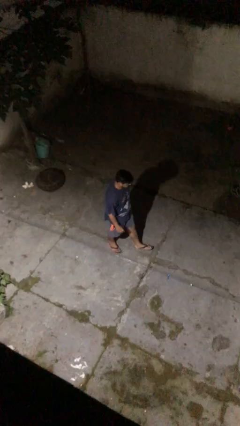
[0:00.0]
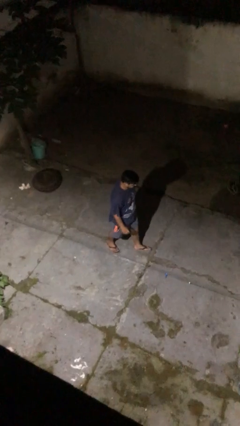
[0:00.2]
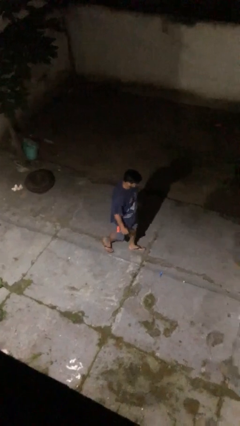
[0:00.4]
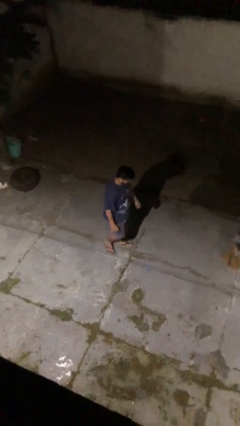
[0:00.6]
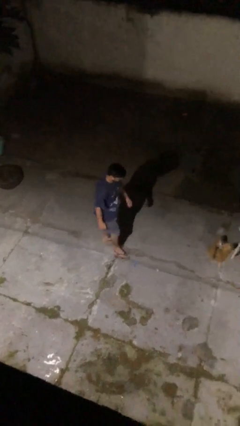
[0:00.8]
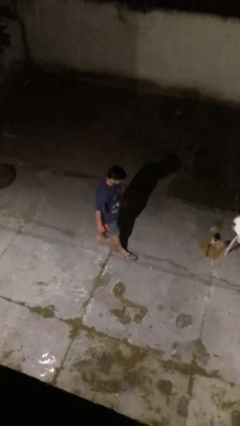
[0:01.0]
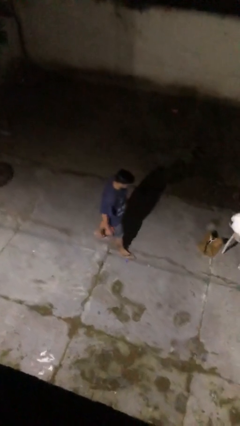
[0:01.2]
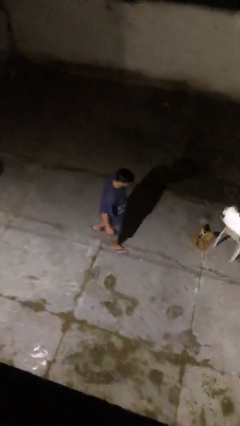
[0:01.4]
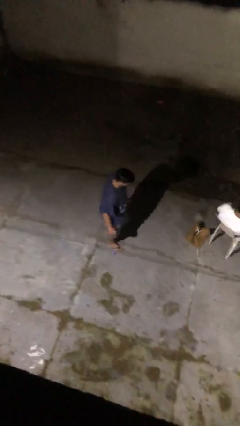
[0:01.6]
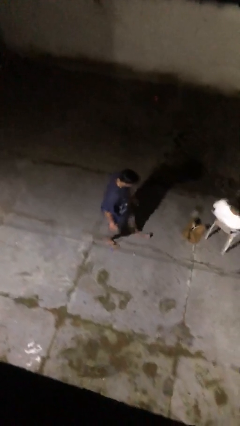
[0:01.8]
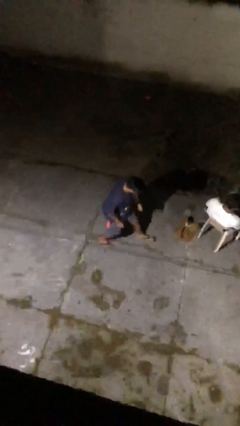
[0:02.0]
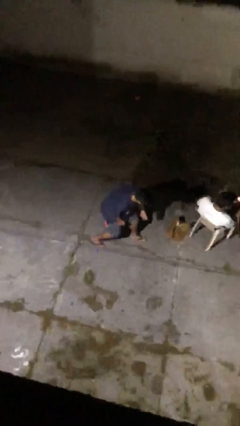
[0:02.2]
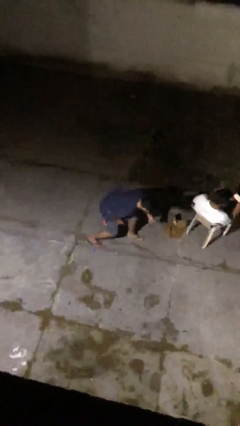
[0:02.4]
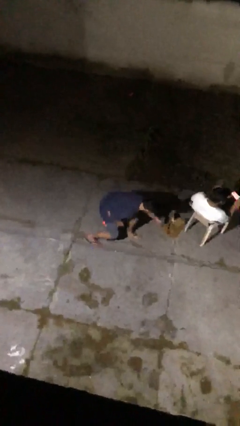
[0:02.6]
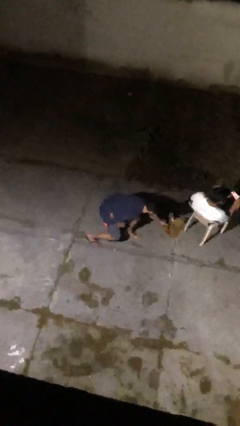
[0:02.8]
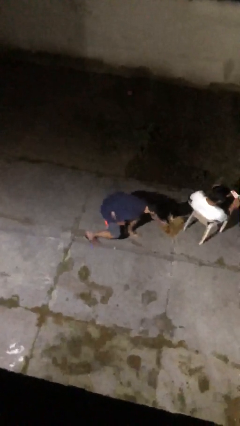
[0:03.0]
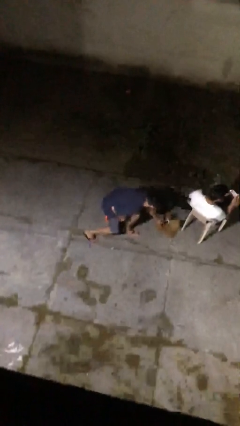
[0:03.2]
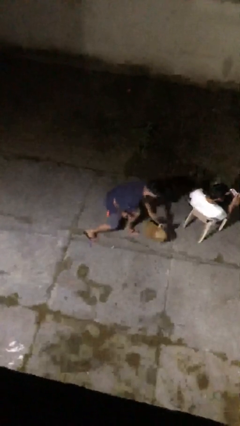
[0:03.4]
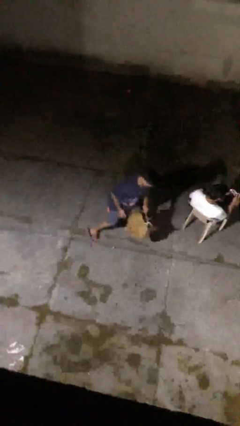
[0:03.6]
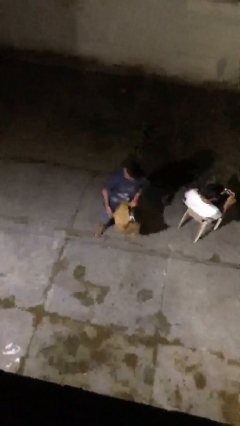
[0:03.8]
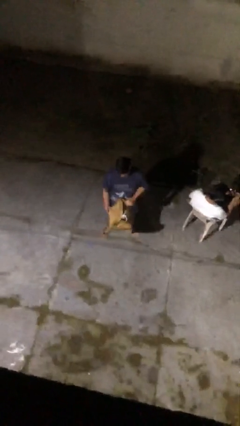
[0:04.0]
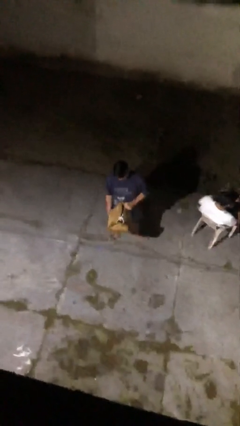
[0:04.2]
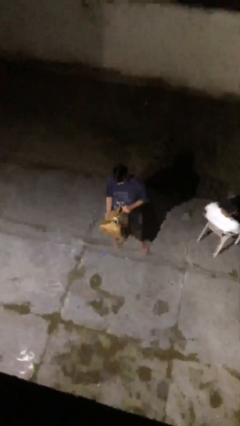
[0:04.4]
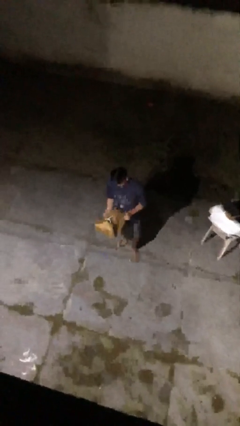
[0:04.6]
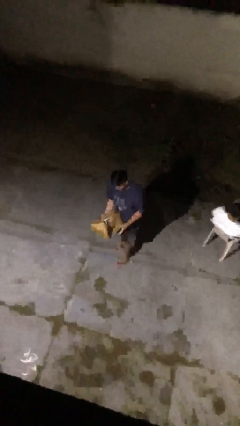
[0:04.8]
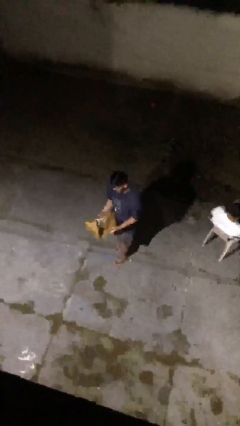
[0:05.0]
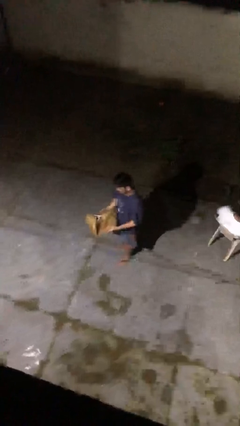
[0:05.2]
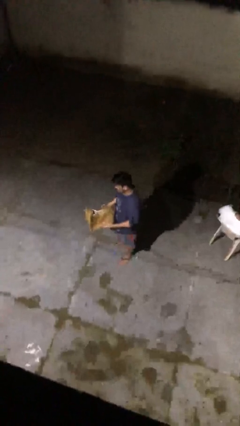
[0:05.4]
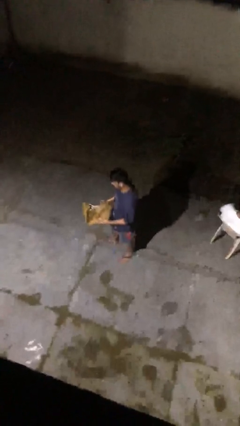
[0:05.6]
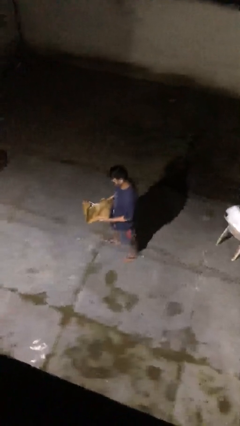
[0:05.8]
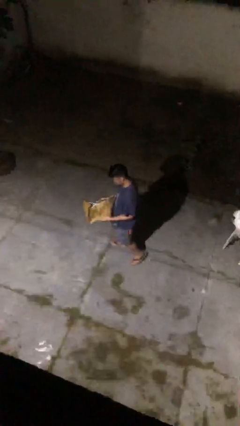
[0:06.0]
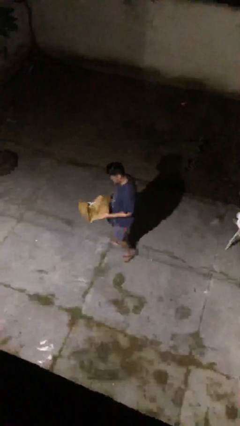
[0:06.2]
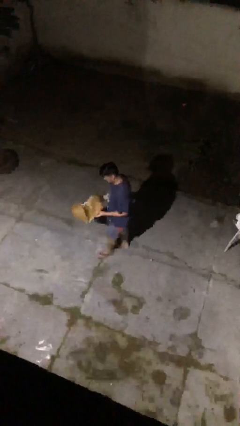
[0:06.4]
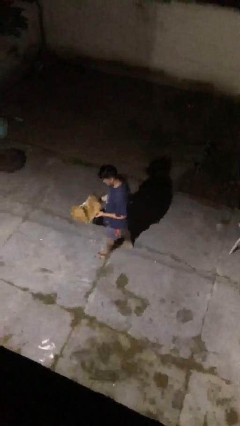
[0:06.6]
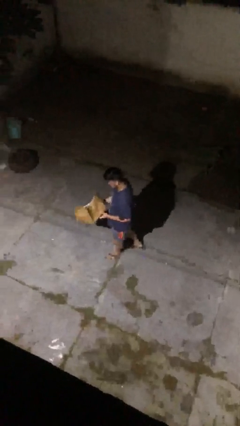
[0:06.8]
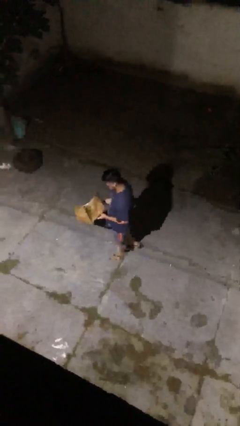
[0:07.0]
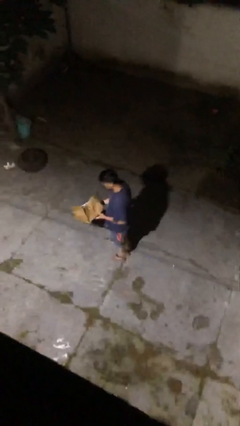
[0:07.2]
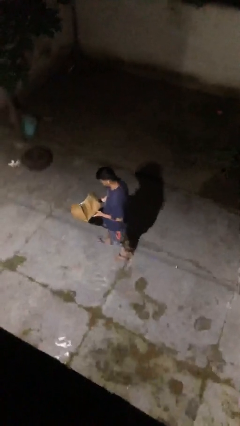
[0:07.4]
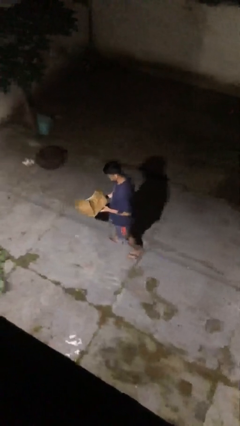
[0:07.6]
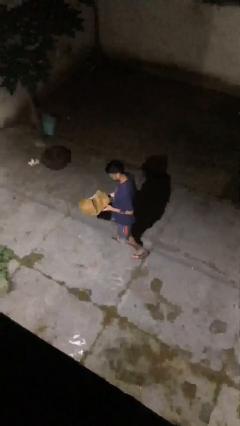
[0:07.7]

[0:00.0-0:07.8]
person steals object from person

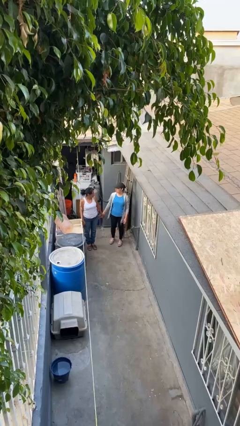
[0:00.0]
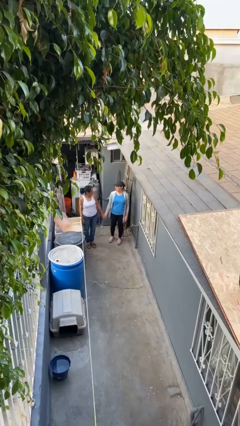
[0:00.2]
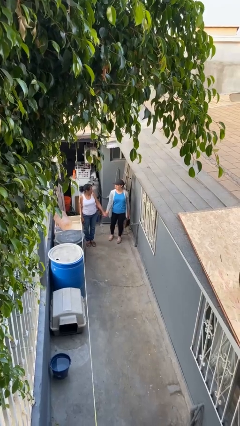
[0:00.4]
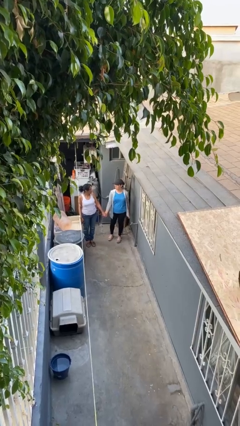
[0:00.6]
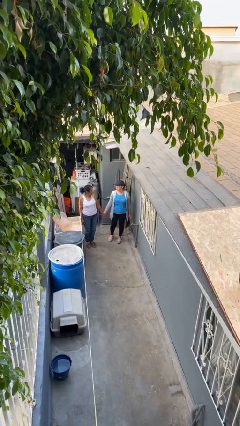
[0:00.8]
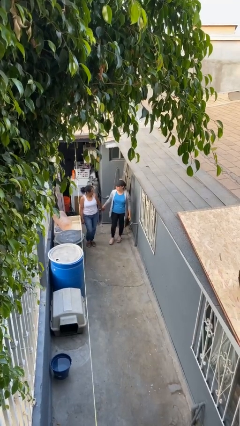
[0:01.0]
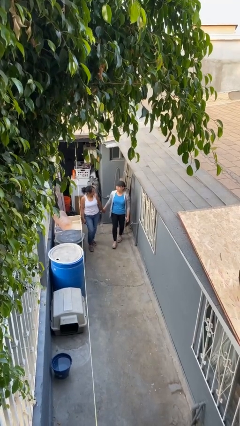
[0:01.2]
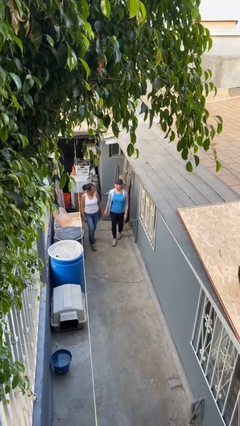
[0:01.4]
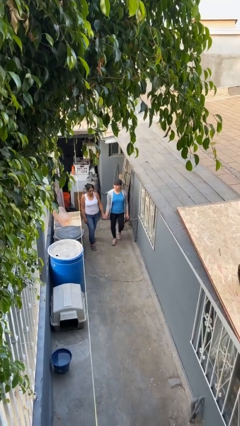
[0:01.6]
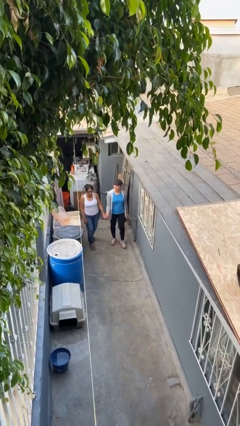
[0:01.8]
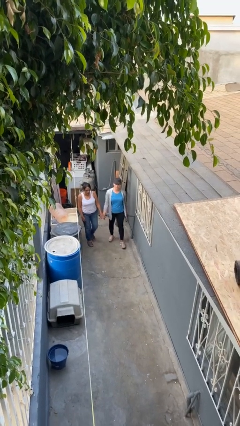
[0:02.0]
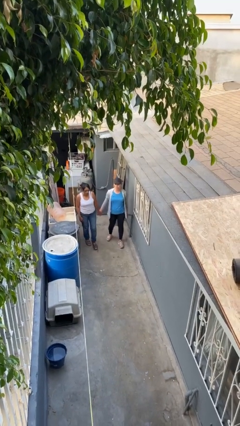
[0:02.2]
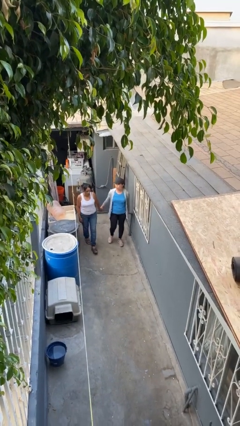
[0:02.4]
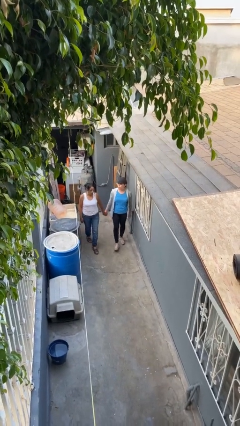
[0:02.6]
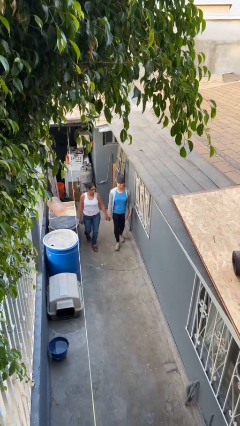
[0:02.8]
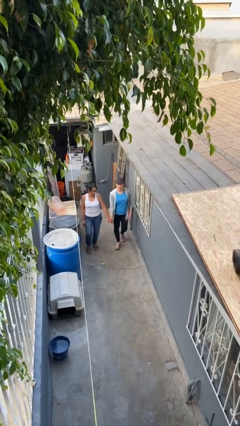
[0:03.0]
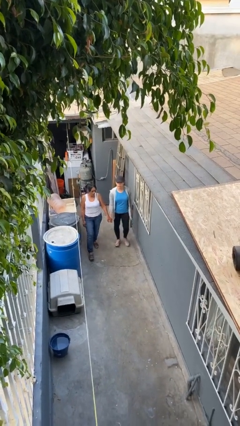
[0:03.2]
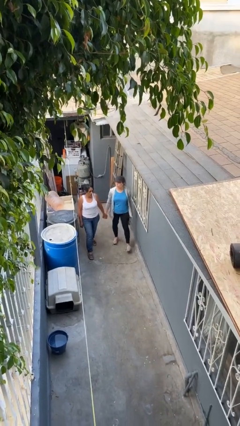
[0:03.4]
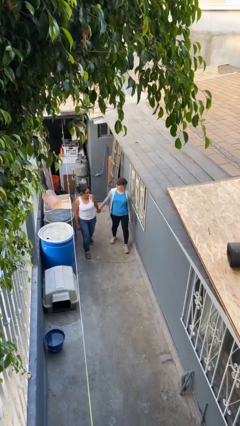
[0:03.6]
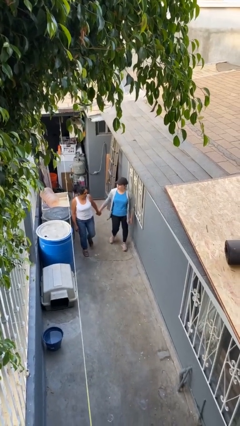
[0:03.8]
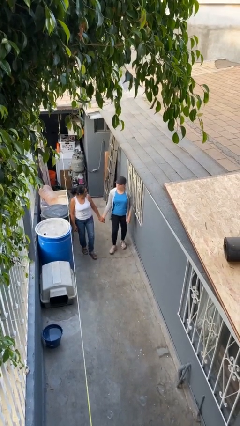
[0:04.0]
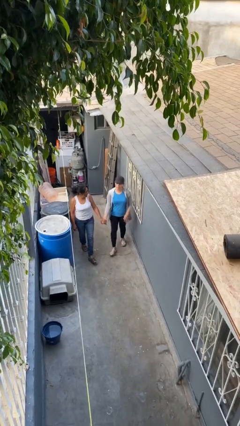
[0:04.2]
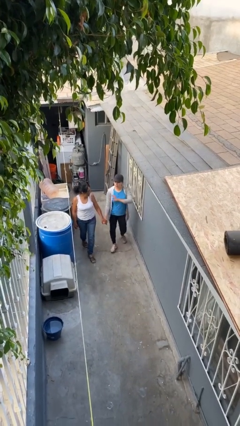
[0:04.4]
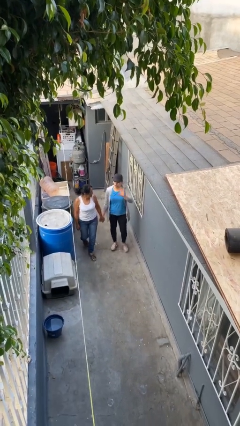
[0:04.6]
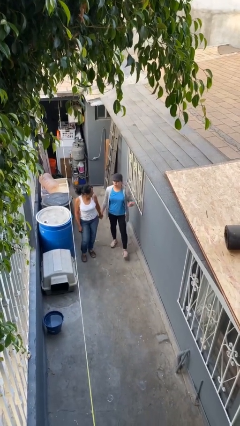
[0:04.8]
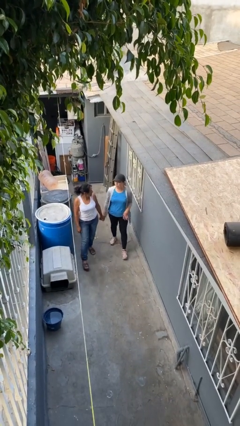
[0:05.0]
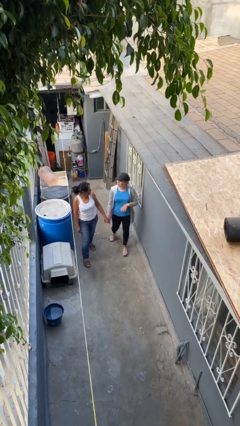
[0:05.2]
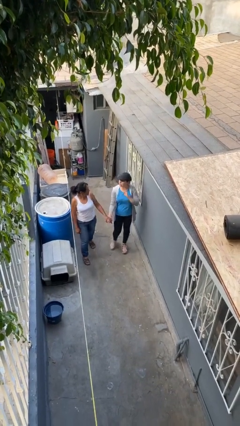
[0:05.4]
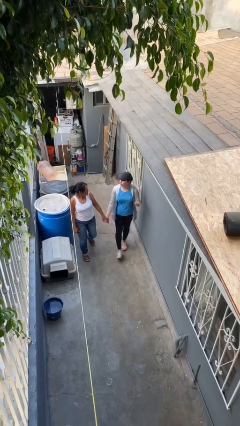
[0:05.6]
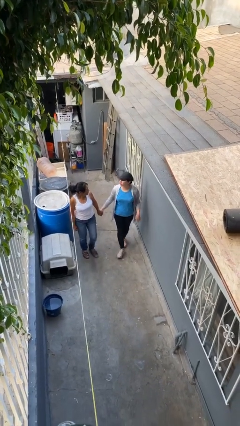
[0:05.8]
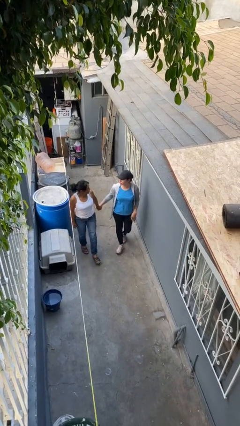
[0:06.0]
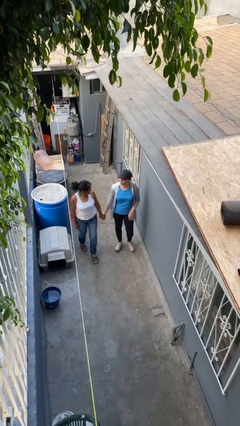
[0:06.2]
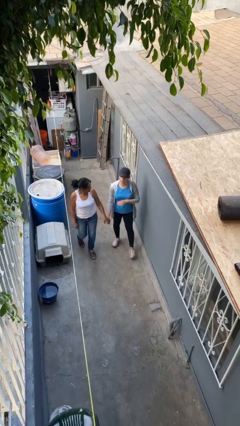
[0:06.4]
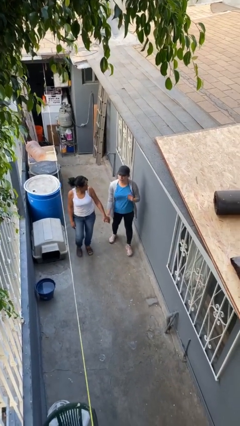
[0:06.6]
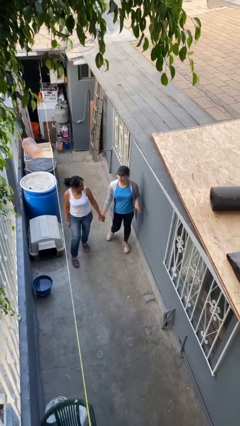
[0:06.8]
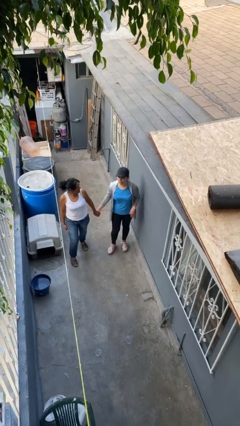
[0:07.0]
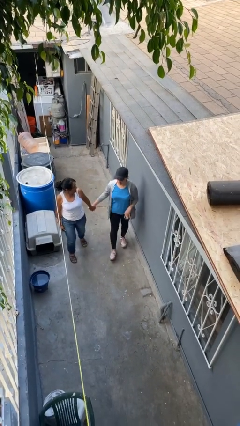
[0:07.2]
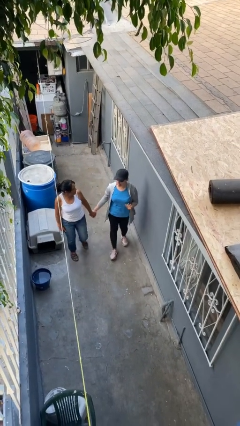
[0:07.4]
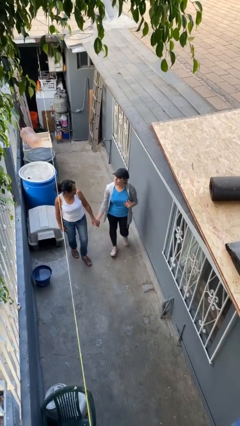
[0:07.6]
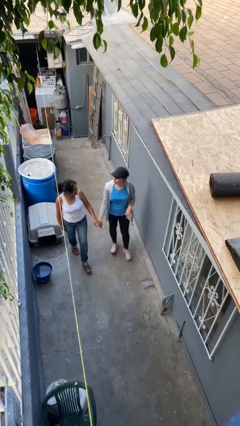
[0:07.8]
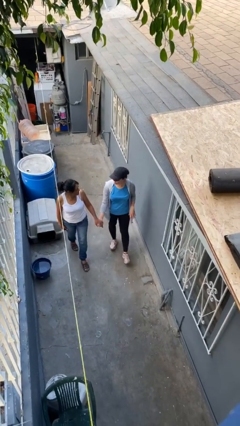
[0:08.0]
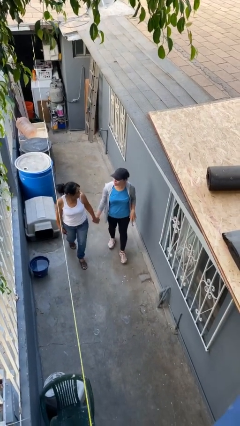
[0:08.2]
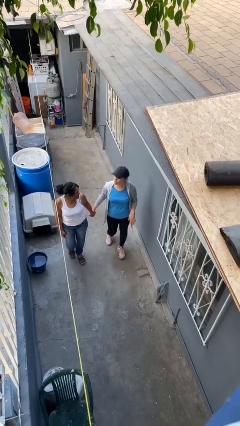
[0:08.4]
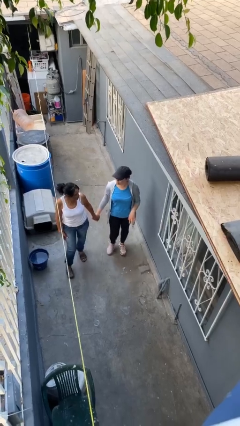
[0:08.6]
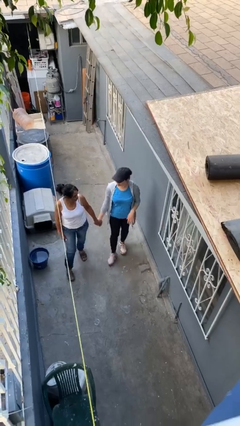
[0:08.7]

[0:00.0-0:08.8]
person holds hand

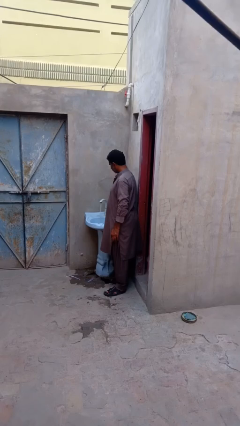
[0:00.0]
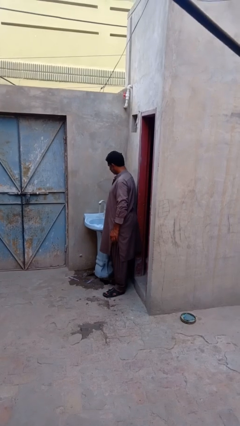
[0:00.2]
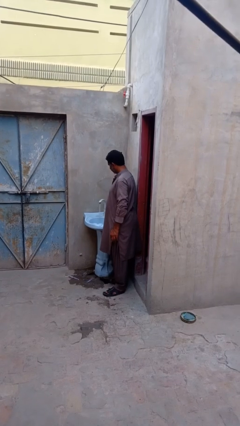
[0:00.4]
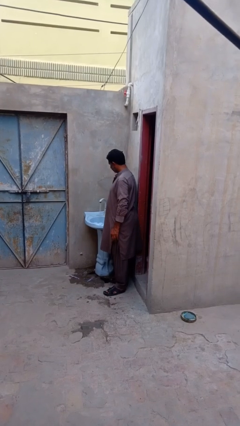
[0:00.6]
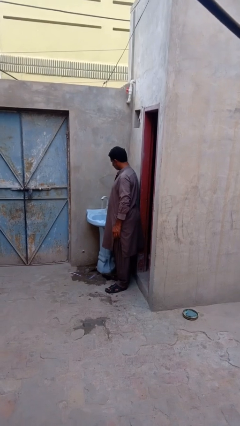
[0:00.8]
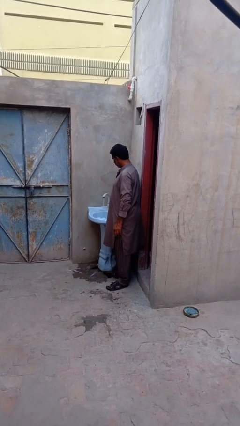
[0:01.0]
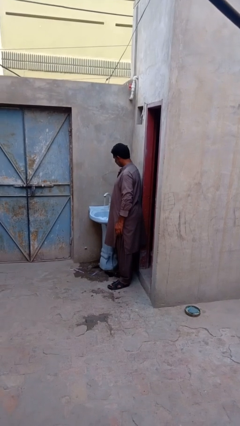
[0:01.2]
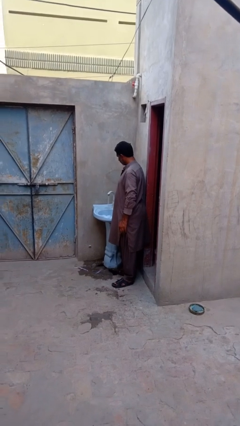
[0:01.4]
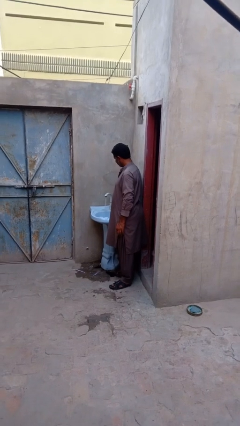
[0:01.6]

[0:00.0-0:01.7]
person turns on faucet
